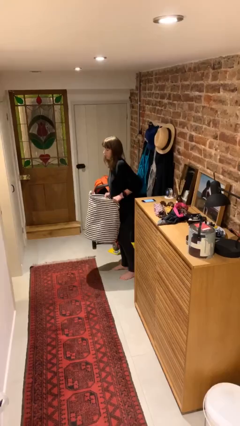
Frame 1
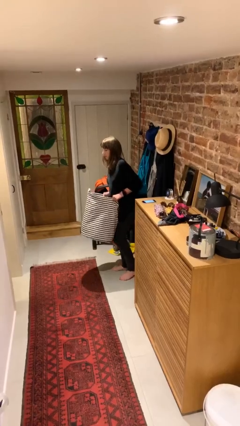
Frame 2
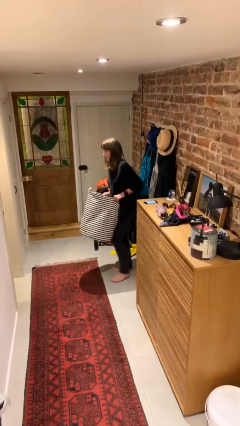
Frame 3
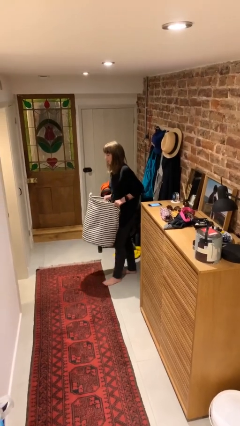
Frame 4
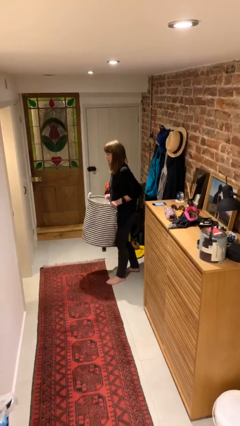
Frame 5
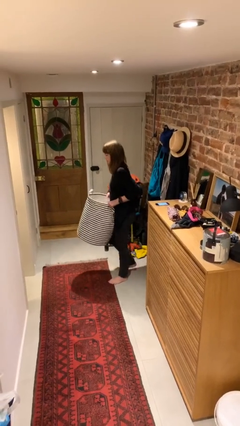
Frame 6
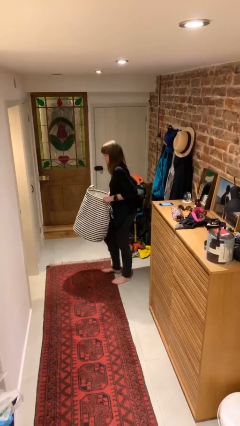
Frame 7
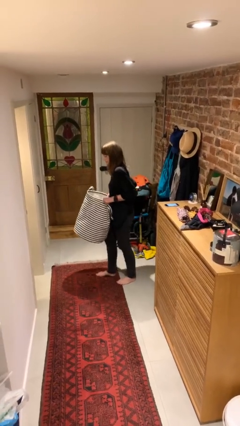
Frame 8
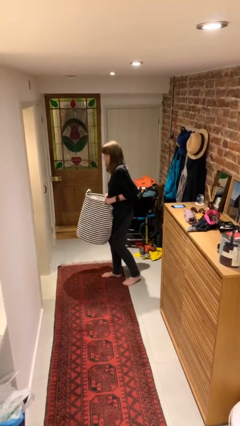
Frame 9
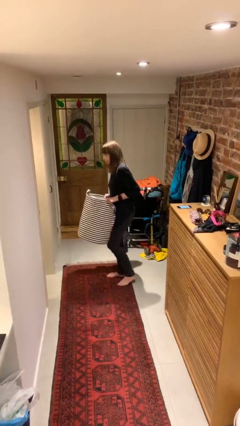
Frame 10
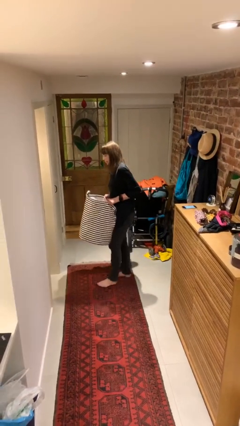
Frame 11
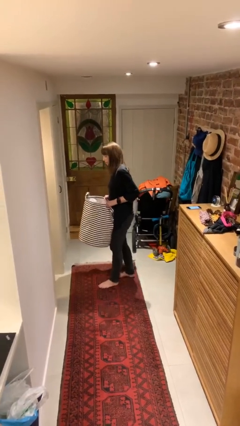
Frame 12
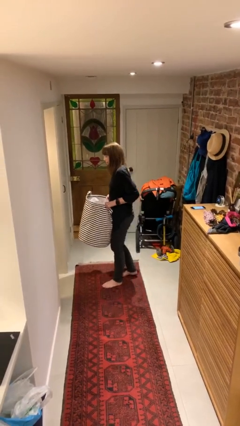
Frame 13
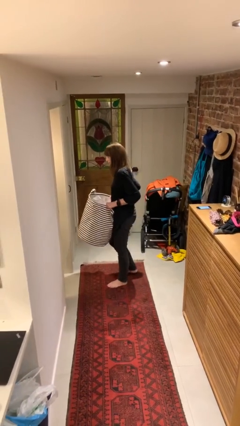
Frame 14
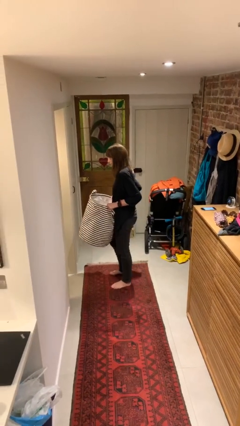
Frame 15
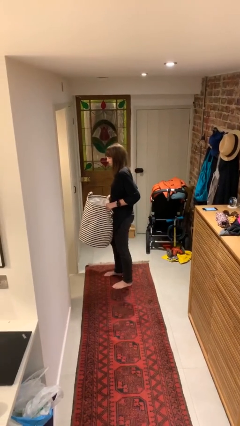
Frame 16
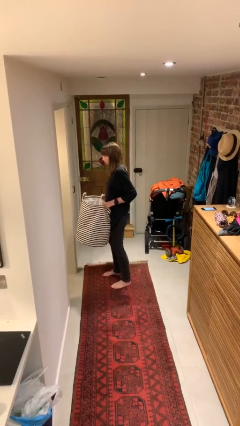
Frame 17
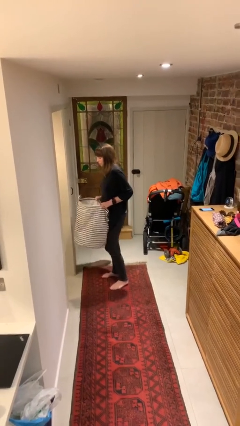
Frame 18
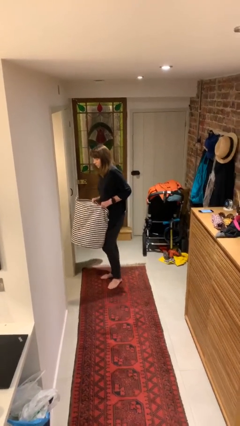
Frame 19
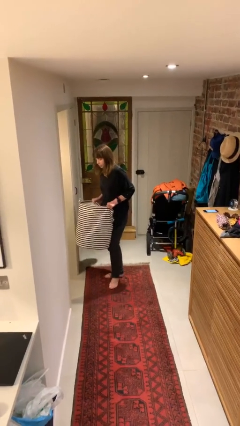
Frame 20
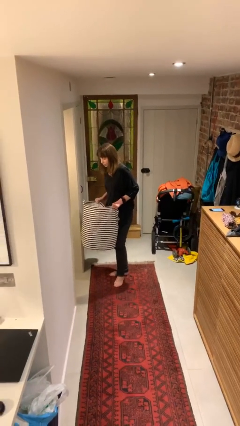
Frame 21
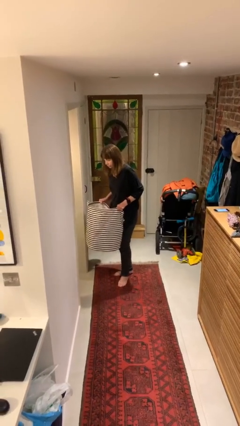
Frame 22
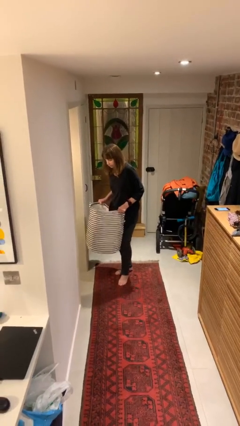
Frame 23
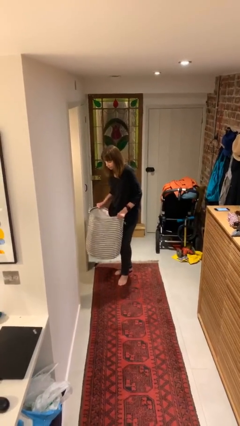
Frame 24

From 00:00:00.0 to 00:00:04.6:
person carries heavy object

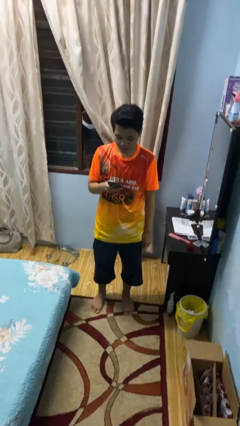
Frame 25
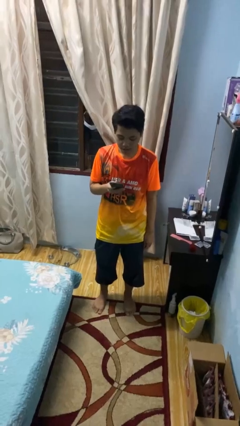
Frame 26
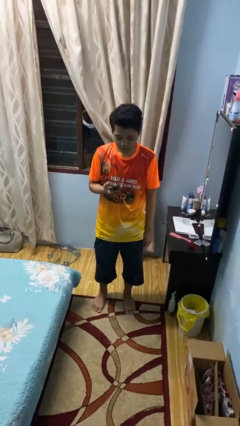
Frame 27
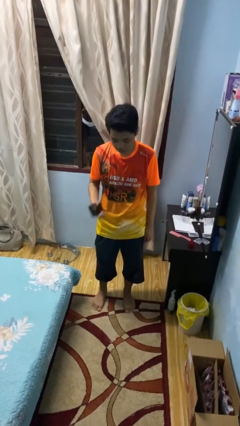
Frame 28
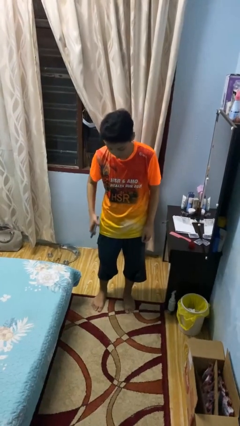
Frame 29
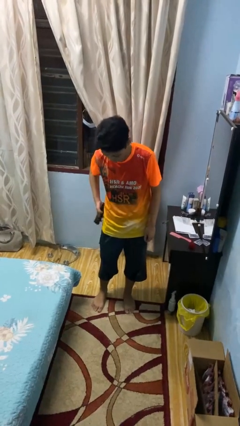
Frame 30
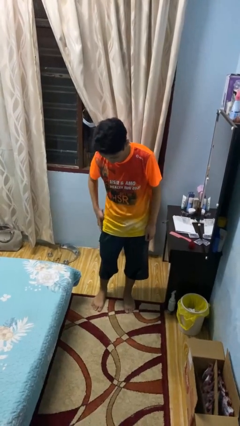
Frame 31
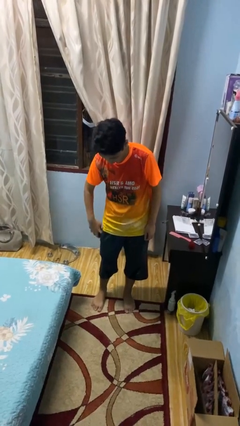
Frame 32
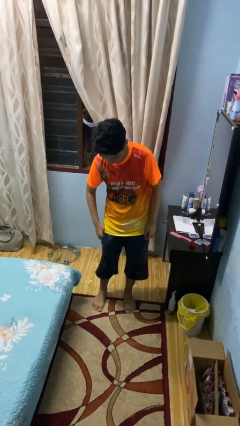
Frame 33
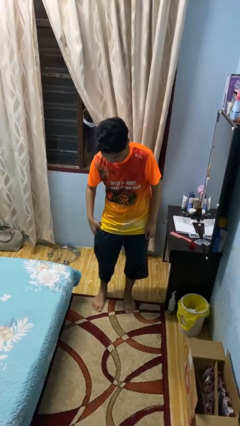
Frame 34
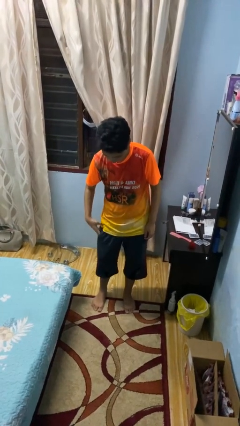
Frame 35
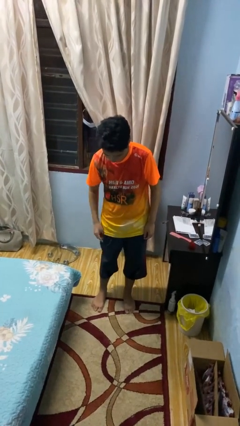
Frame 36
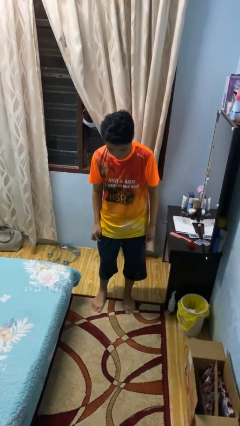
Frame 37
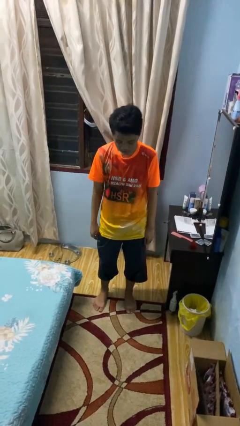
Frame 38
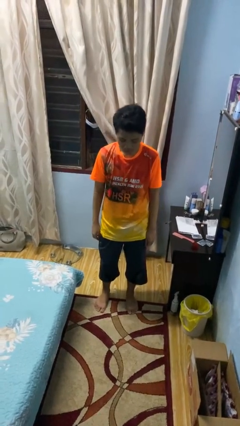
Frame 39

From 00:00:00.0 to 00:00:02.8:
person puts phone into pocket

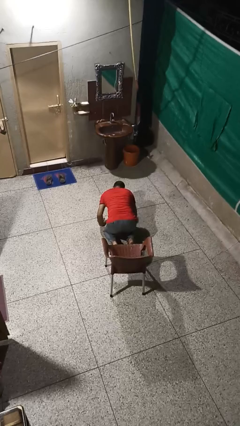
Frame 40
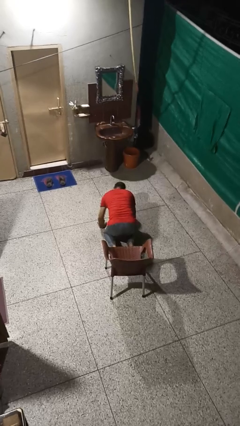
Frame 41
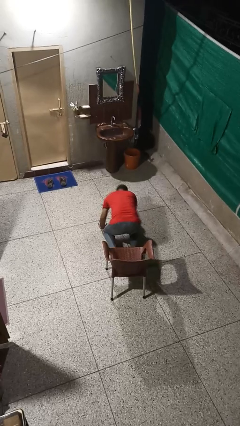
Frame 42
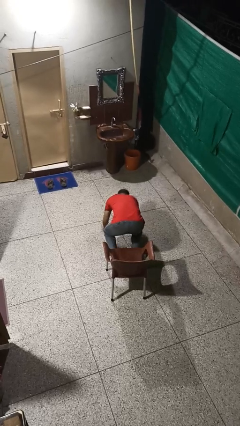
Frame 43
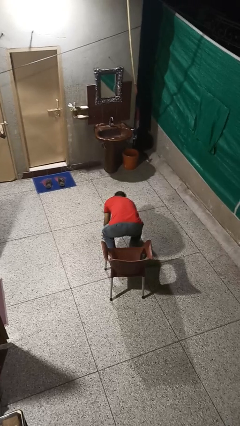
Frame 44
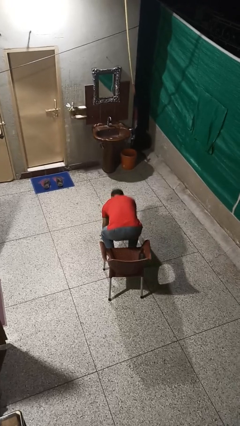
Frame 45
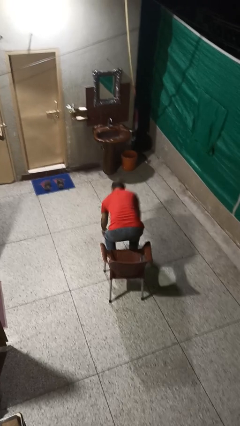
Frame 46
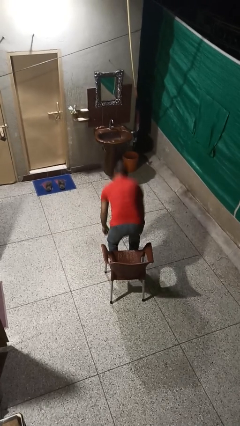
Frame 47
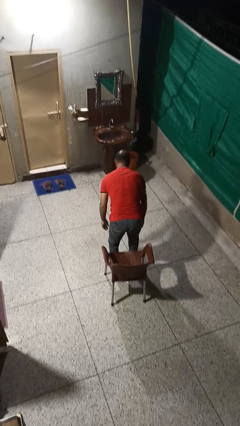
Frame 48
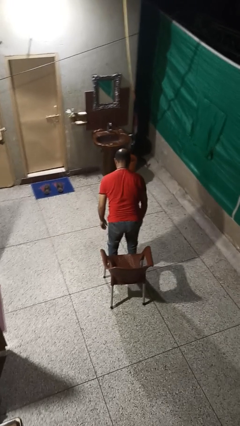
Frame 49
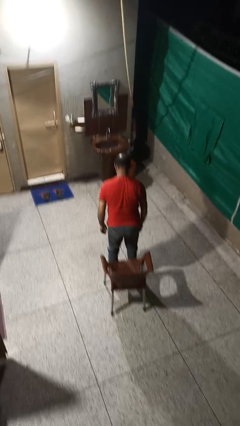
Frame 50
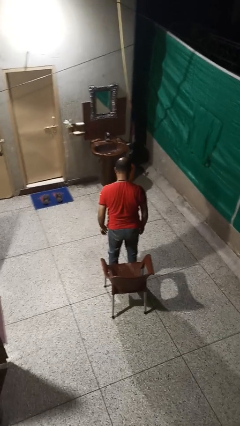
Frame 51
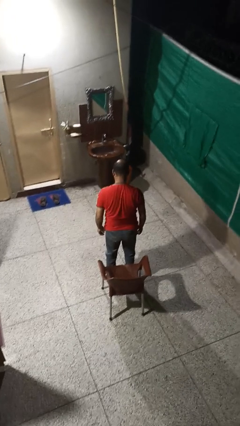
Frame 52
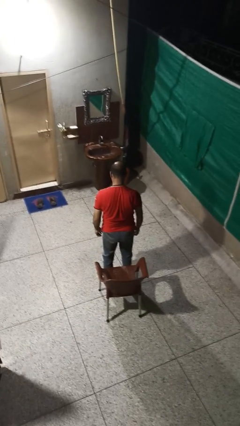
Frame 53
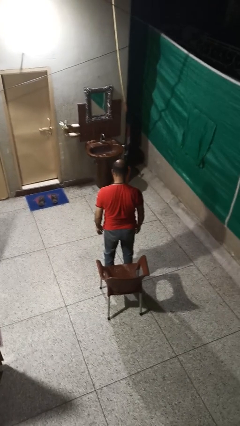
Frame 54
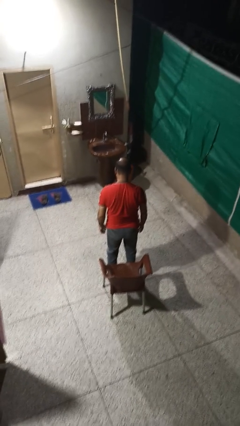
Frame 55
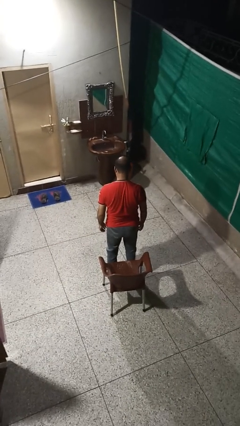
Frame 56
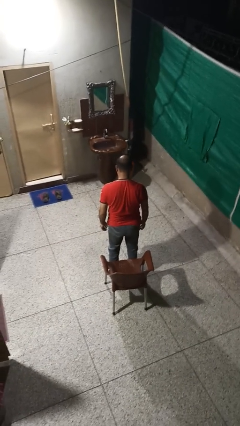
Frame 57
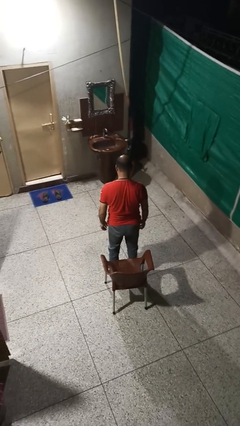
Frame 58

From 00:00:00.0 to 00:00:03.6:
person stands up from floor

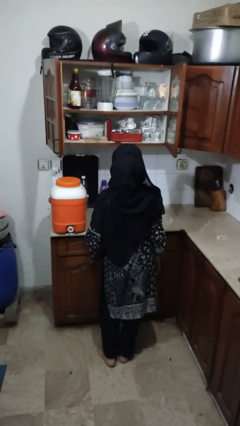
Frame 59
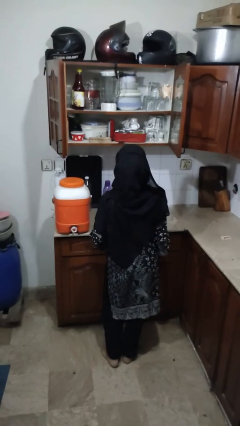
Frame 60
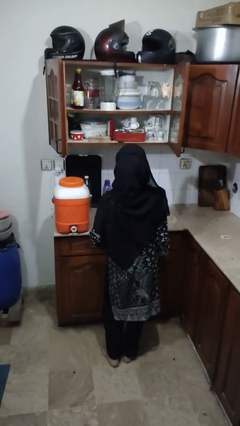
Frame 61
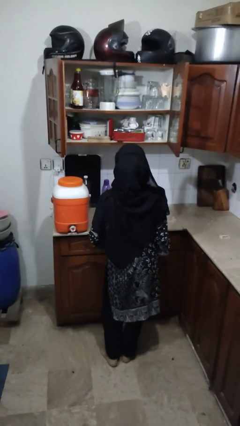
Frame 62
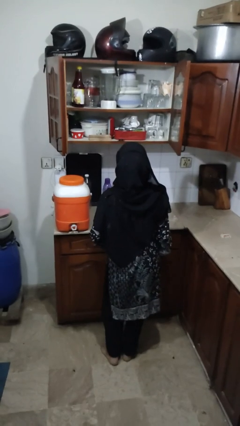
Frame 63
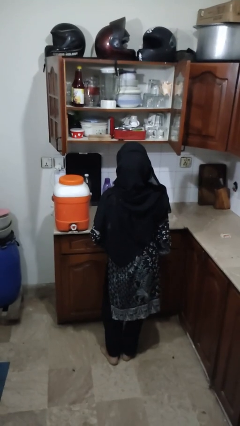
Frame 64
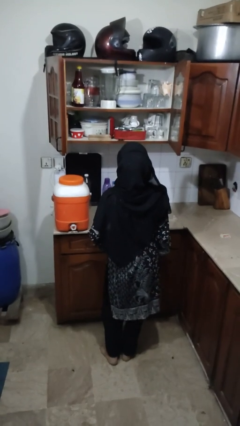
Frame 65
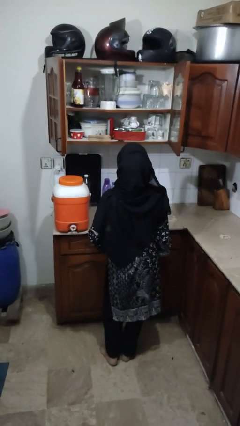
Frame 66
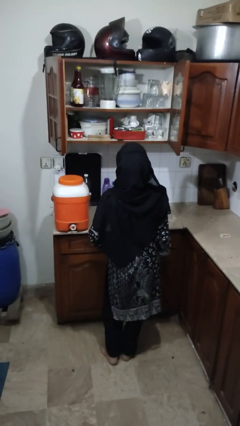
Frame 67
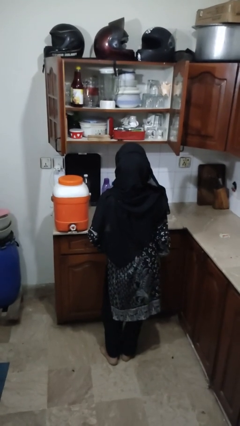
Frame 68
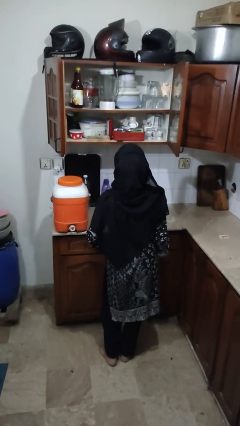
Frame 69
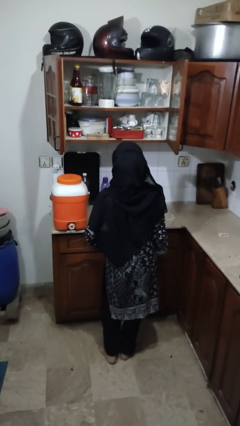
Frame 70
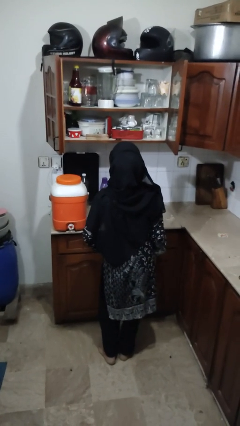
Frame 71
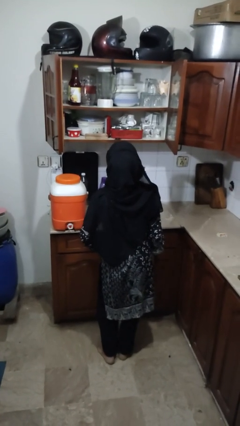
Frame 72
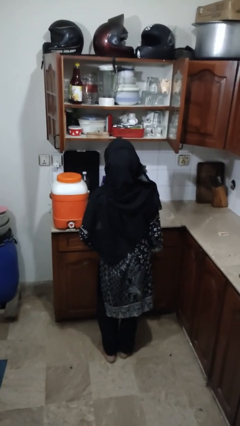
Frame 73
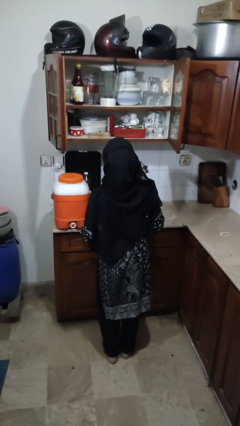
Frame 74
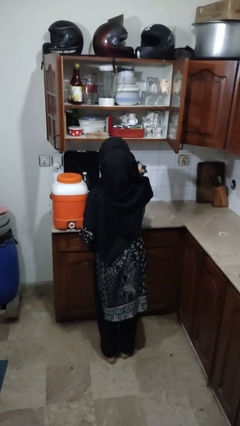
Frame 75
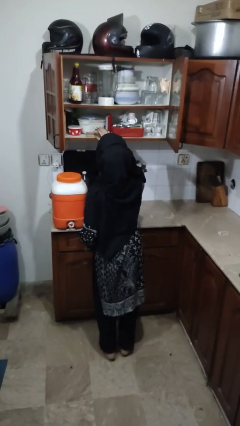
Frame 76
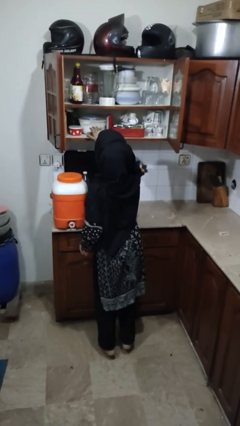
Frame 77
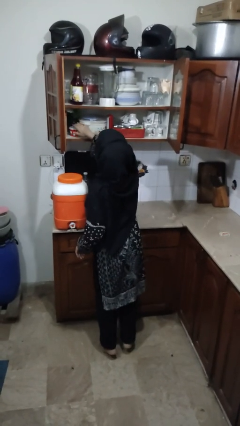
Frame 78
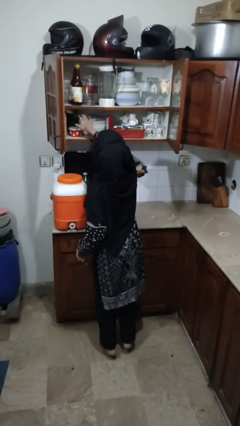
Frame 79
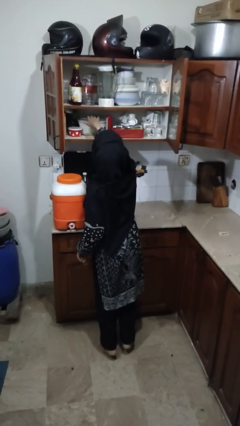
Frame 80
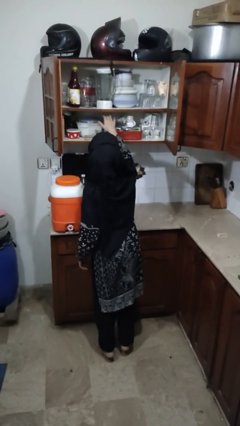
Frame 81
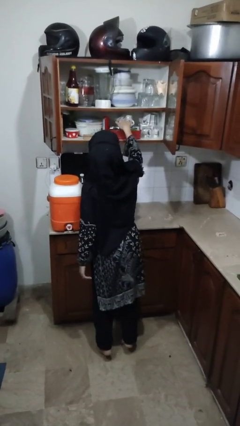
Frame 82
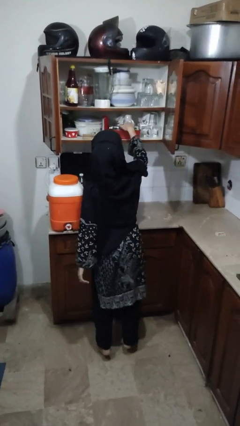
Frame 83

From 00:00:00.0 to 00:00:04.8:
person searches in cabinet

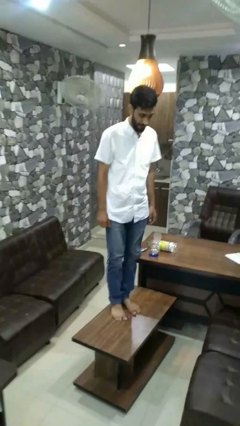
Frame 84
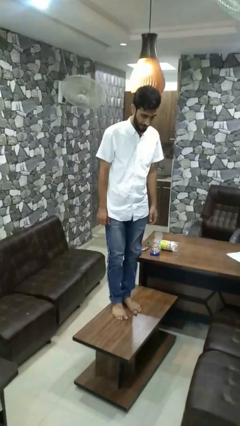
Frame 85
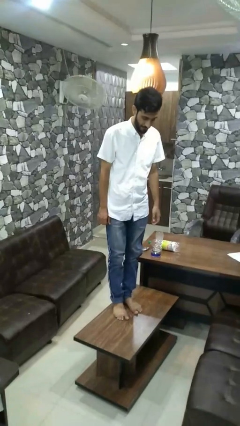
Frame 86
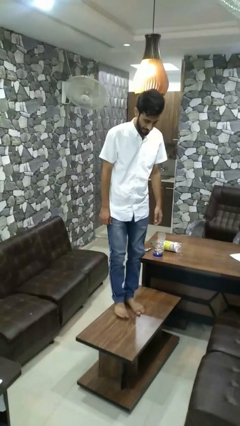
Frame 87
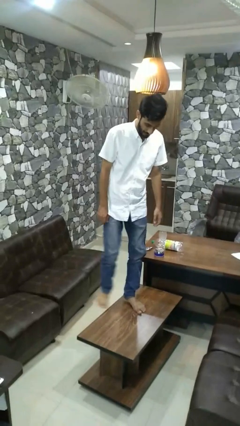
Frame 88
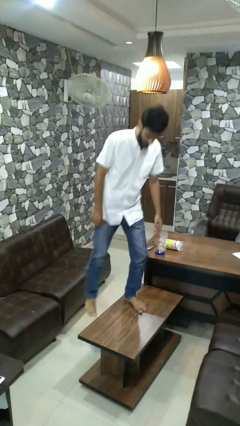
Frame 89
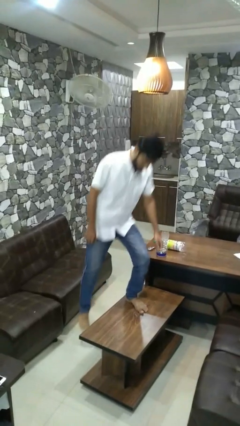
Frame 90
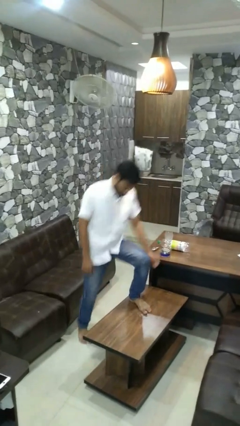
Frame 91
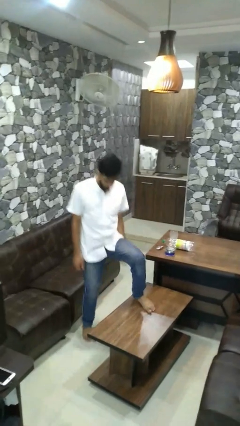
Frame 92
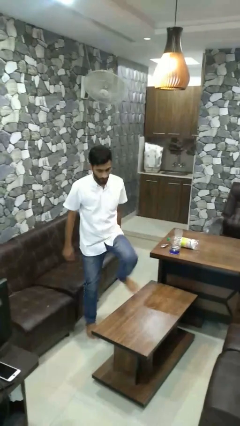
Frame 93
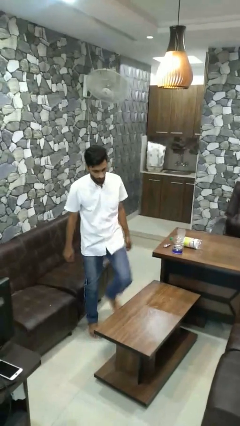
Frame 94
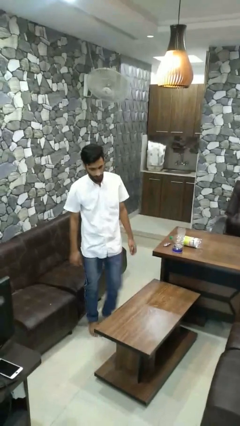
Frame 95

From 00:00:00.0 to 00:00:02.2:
person climbs off table
